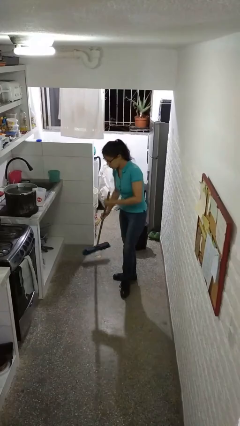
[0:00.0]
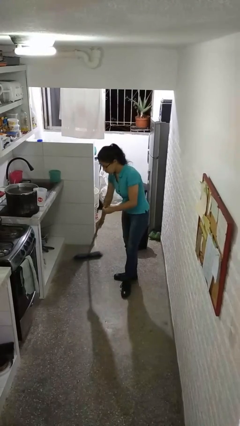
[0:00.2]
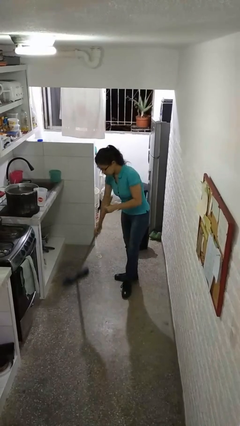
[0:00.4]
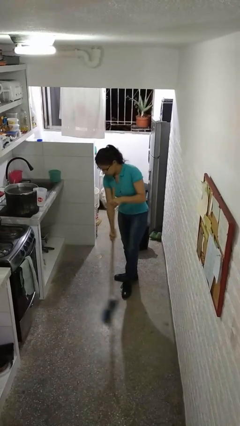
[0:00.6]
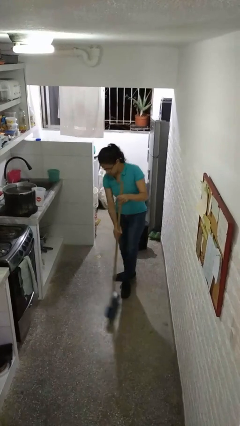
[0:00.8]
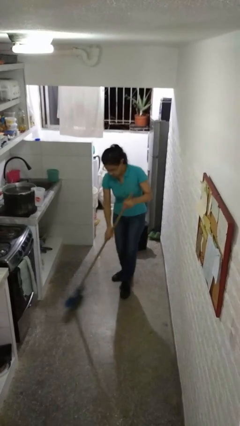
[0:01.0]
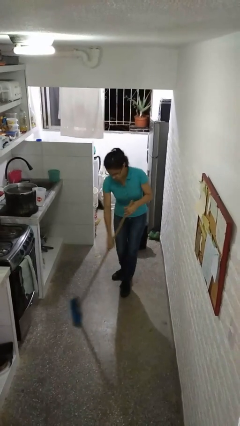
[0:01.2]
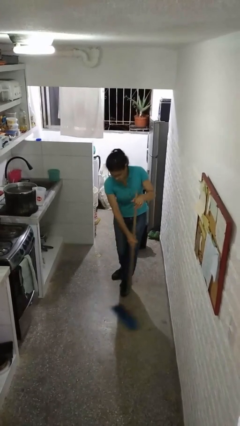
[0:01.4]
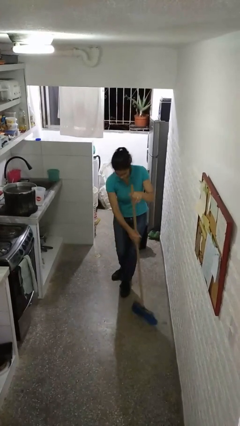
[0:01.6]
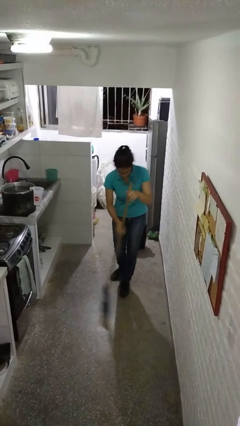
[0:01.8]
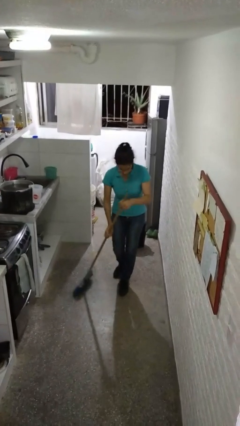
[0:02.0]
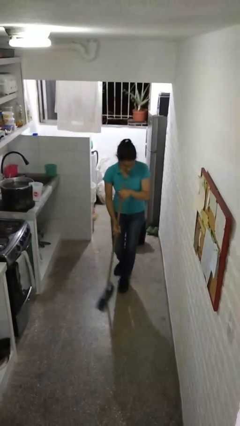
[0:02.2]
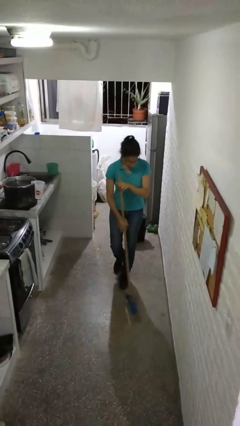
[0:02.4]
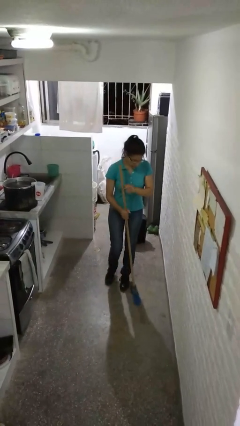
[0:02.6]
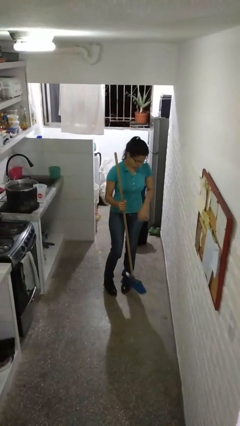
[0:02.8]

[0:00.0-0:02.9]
person sweeps floor

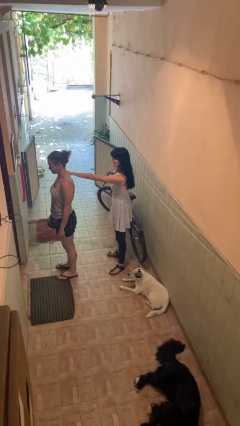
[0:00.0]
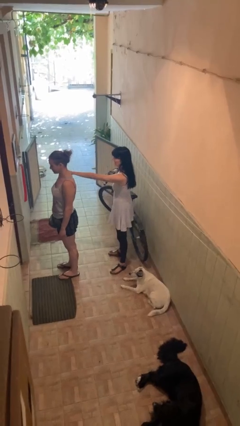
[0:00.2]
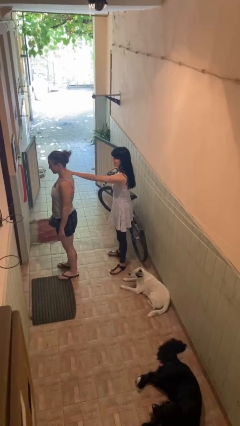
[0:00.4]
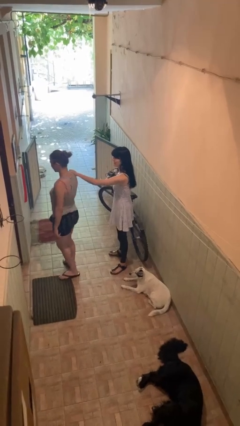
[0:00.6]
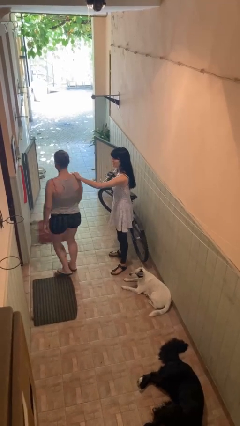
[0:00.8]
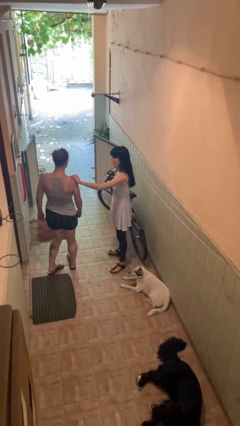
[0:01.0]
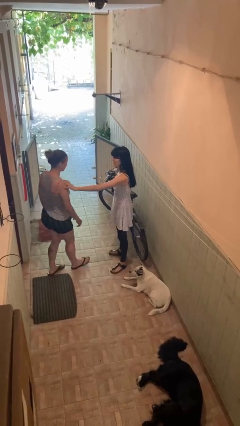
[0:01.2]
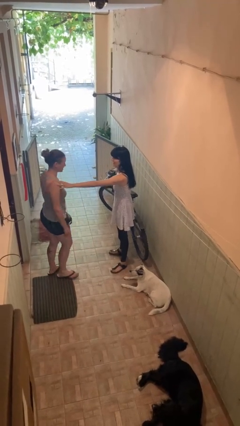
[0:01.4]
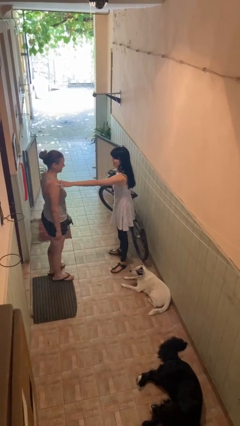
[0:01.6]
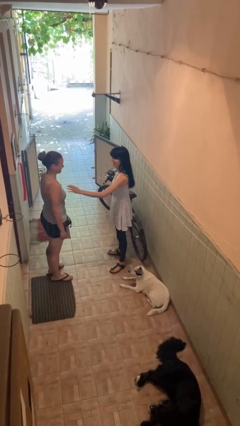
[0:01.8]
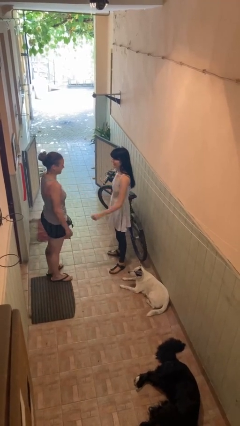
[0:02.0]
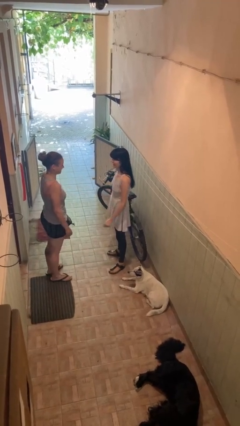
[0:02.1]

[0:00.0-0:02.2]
person spins person around

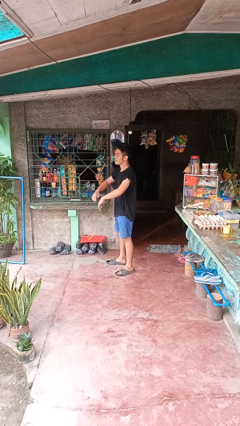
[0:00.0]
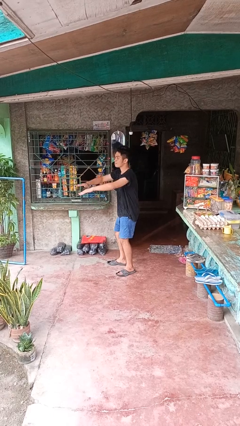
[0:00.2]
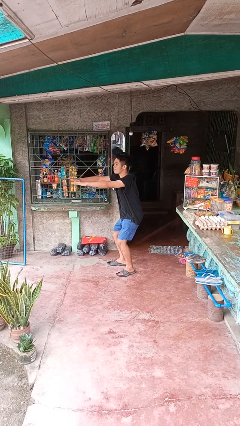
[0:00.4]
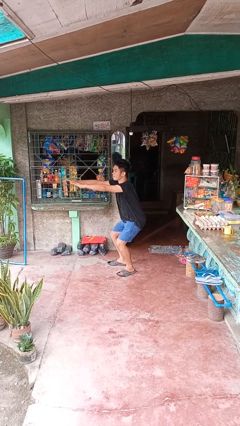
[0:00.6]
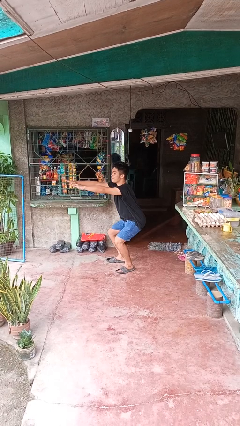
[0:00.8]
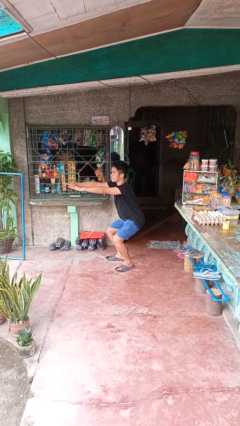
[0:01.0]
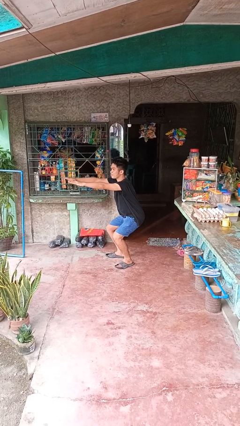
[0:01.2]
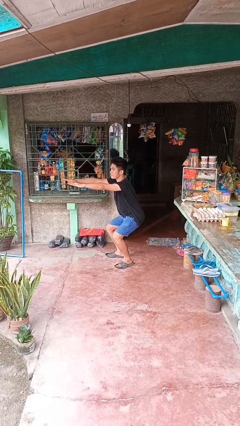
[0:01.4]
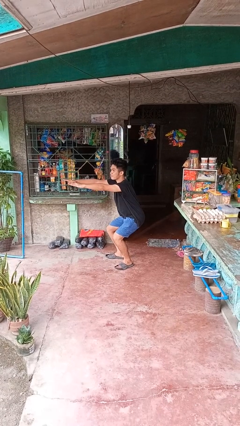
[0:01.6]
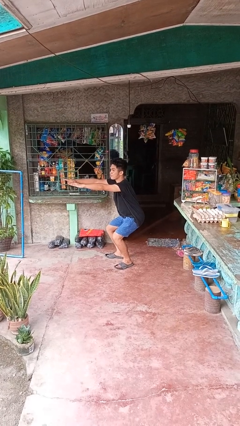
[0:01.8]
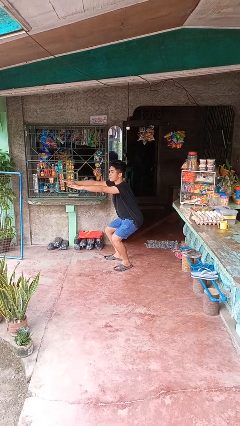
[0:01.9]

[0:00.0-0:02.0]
person squats

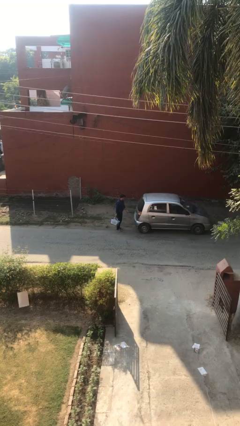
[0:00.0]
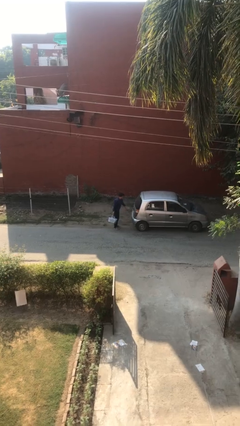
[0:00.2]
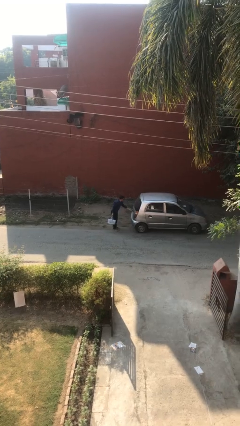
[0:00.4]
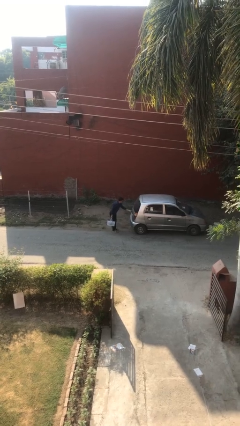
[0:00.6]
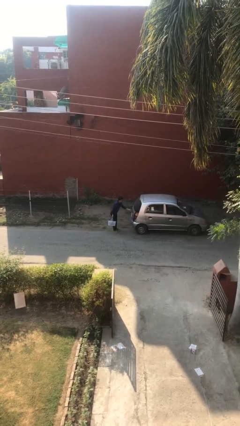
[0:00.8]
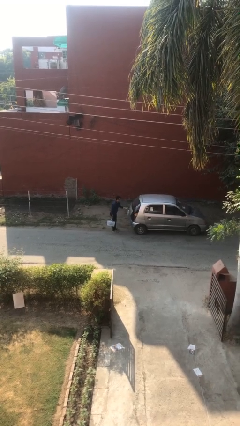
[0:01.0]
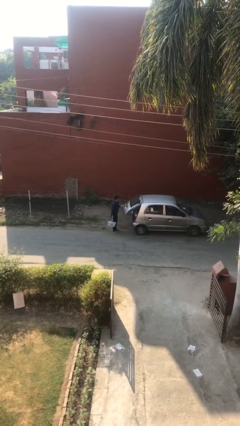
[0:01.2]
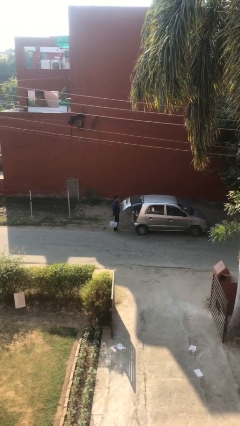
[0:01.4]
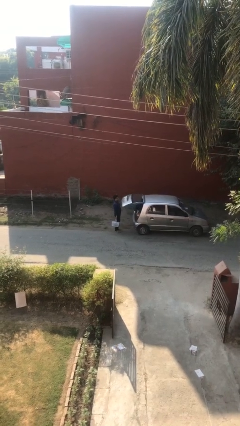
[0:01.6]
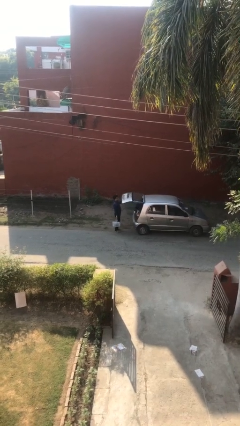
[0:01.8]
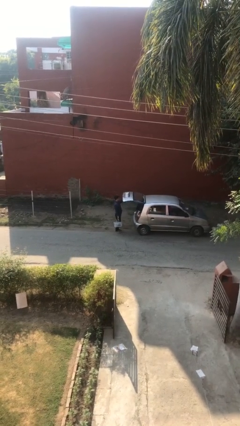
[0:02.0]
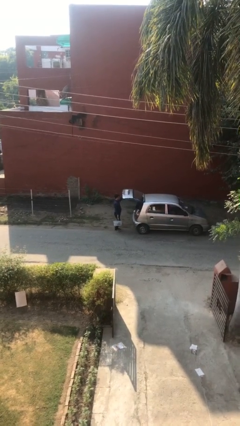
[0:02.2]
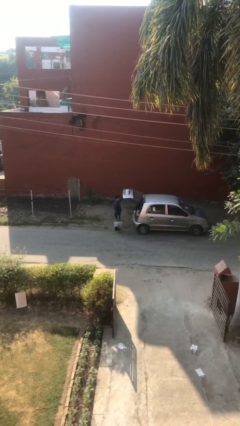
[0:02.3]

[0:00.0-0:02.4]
person opens car trunk

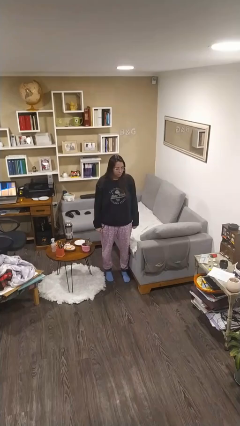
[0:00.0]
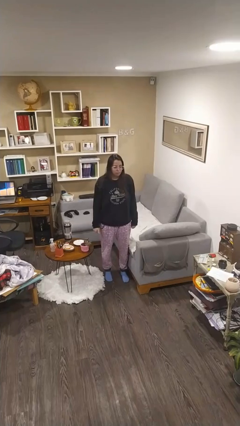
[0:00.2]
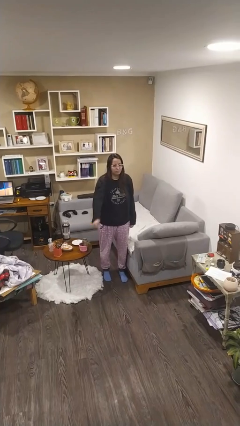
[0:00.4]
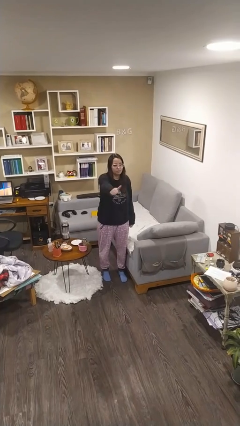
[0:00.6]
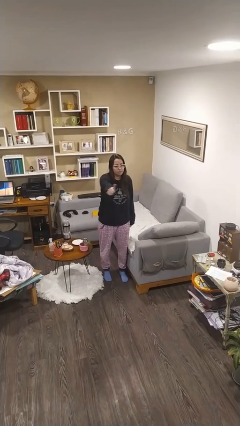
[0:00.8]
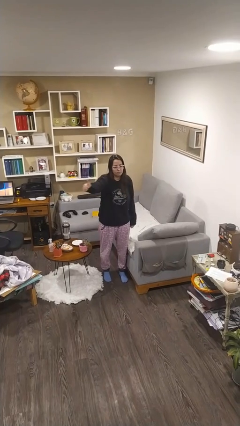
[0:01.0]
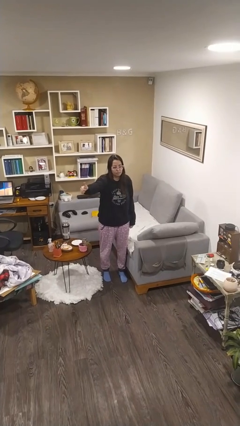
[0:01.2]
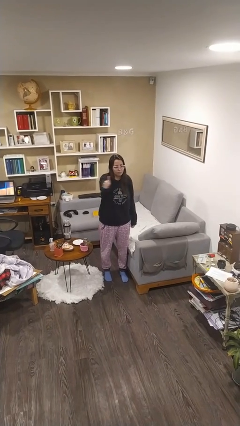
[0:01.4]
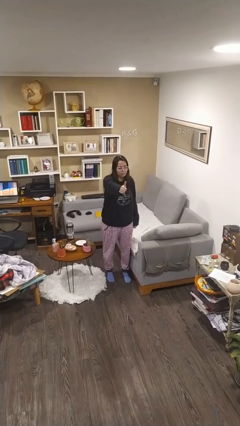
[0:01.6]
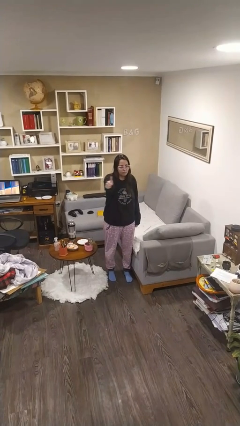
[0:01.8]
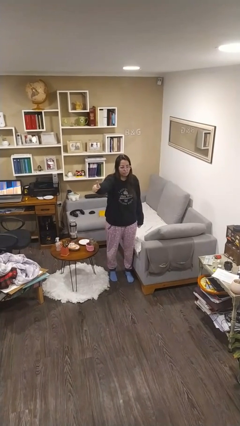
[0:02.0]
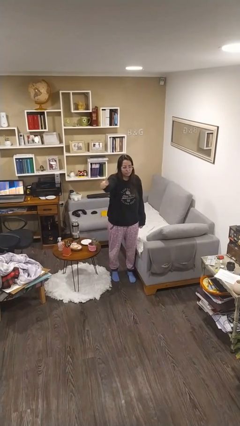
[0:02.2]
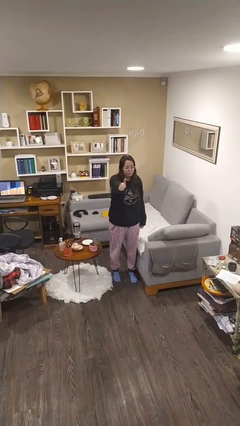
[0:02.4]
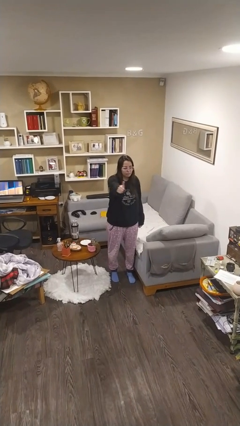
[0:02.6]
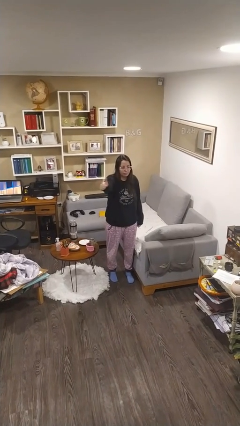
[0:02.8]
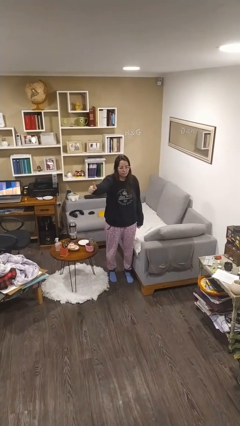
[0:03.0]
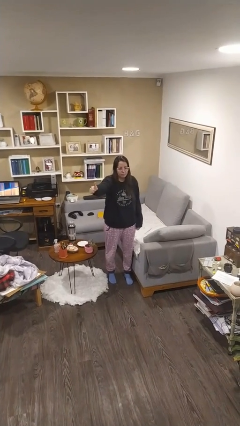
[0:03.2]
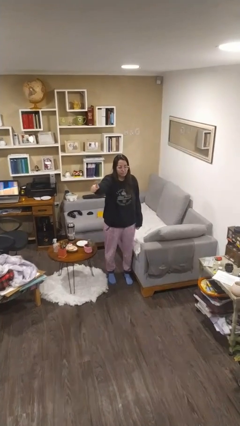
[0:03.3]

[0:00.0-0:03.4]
person gestures thumbs up

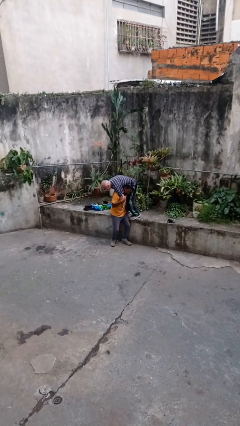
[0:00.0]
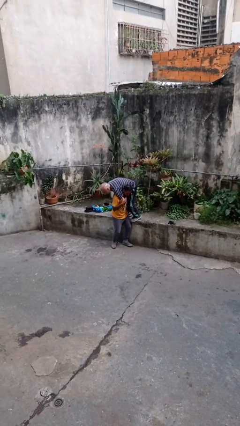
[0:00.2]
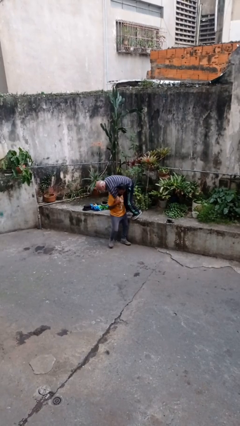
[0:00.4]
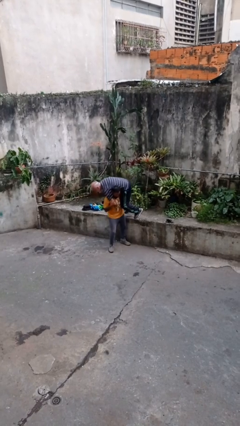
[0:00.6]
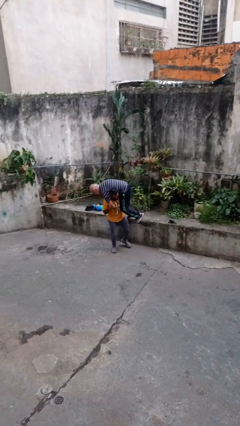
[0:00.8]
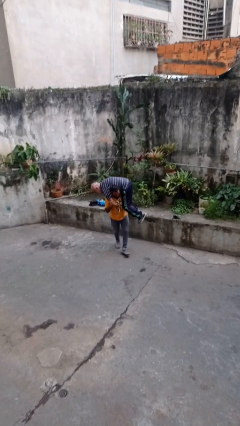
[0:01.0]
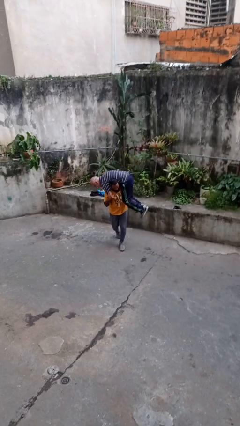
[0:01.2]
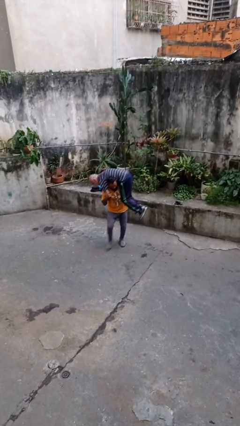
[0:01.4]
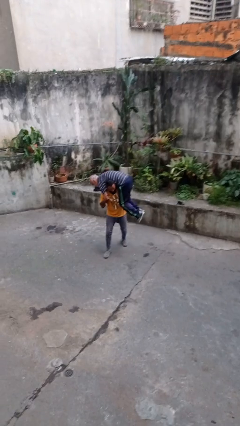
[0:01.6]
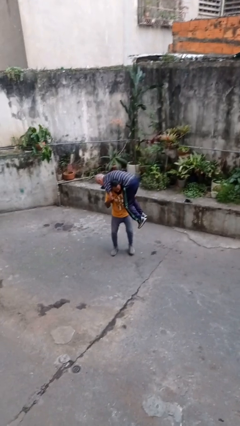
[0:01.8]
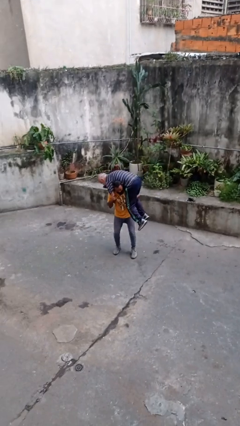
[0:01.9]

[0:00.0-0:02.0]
person carries person over shoulder

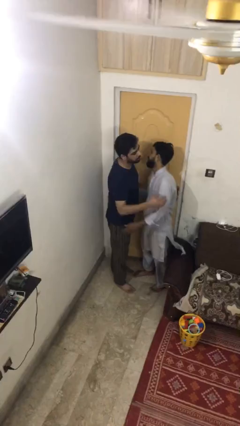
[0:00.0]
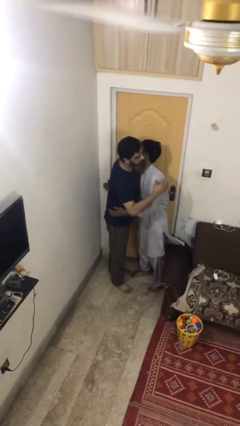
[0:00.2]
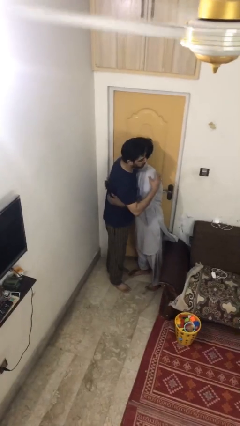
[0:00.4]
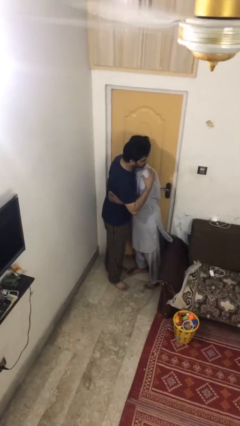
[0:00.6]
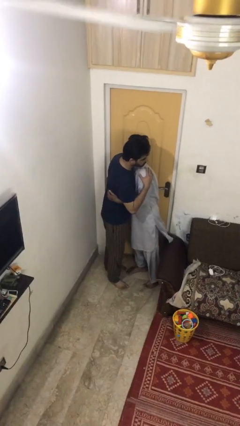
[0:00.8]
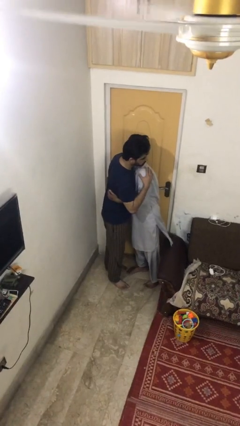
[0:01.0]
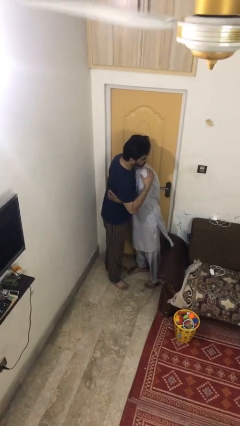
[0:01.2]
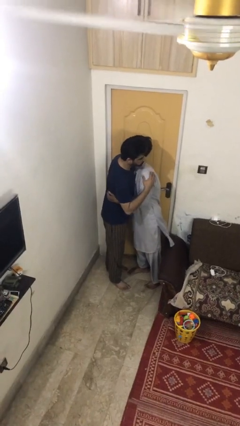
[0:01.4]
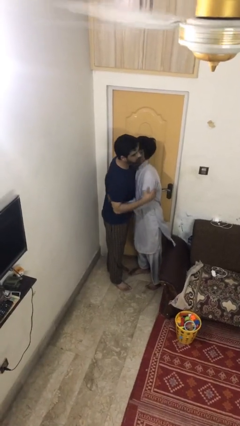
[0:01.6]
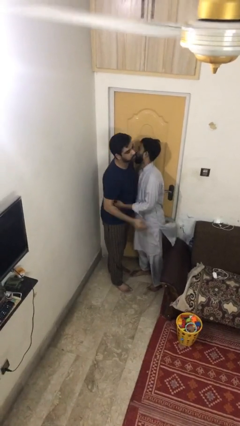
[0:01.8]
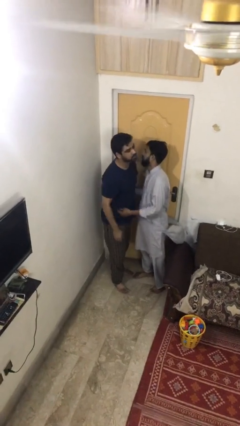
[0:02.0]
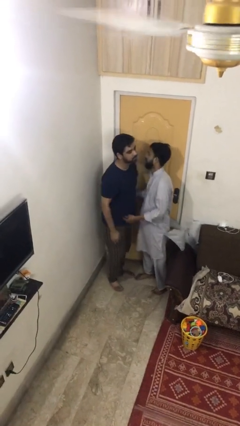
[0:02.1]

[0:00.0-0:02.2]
person embraces person

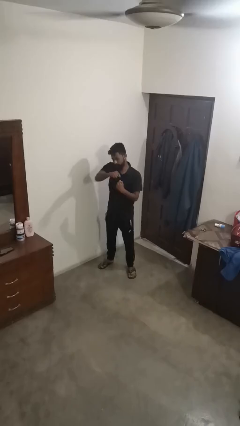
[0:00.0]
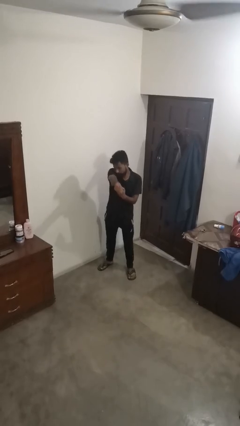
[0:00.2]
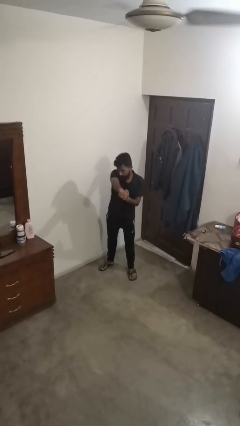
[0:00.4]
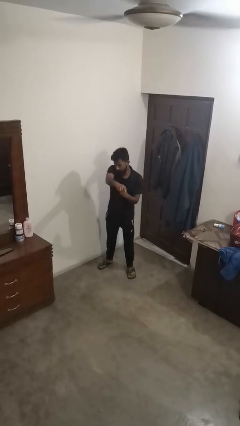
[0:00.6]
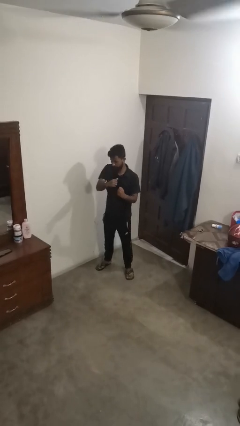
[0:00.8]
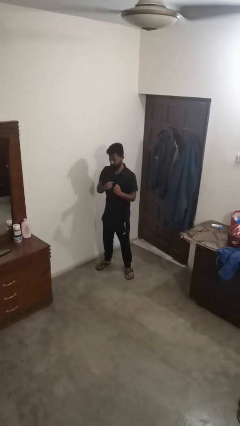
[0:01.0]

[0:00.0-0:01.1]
person punches
